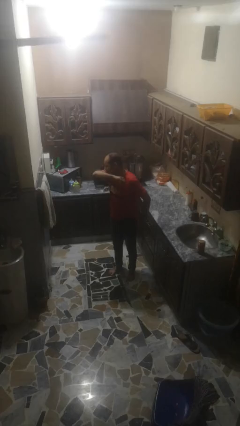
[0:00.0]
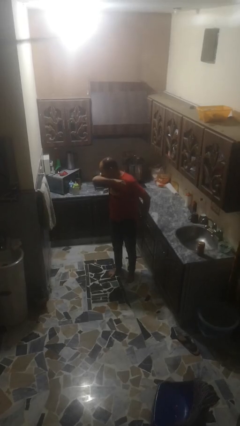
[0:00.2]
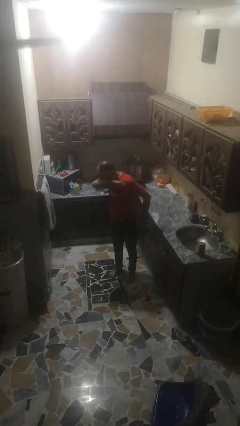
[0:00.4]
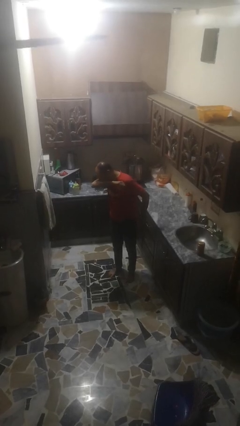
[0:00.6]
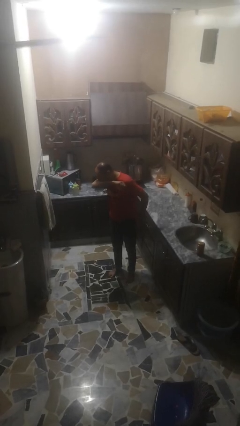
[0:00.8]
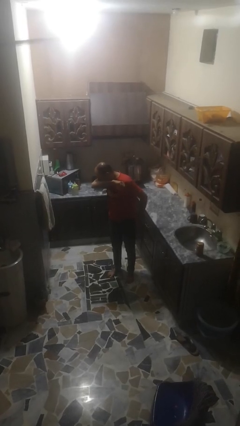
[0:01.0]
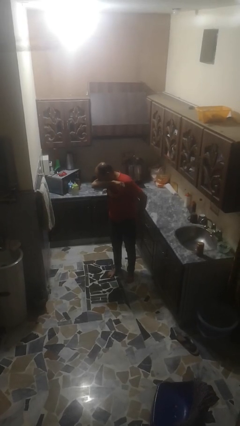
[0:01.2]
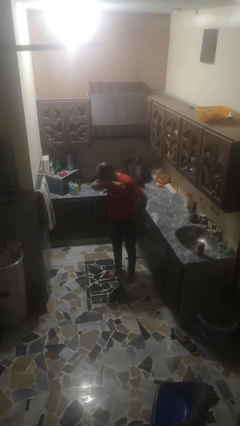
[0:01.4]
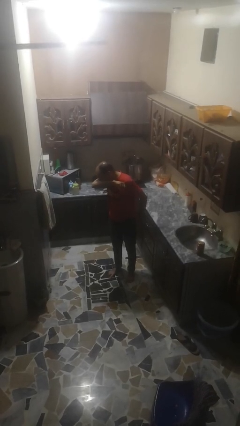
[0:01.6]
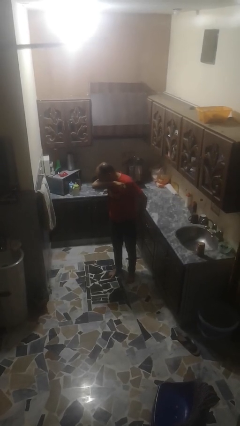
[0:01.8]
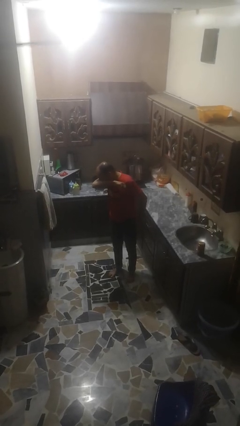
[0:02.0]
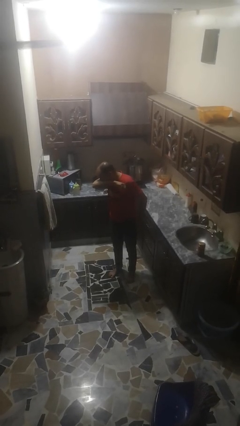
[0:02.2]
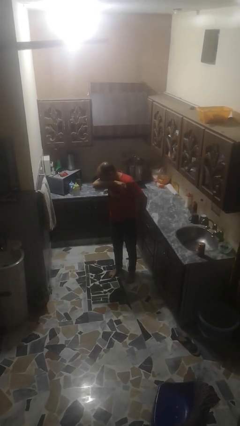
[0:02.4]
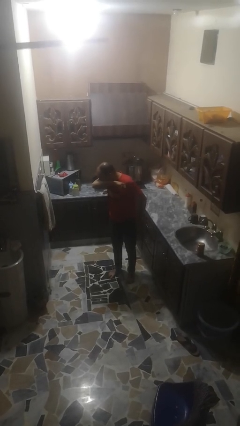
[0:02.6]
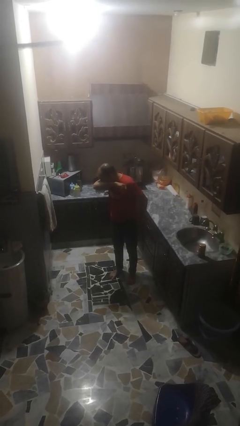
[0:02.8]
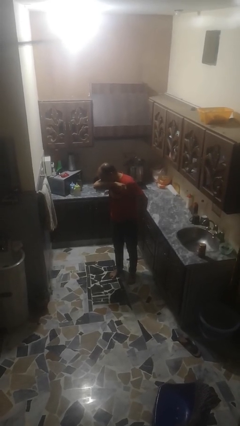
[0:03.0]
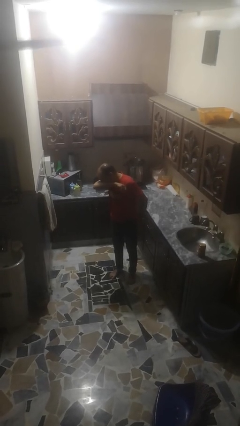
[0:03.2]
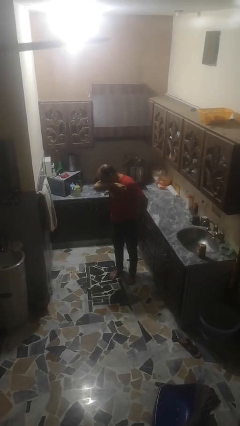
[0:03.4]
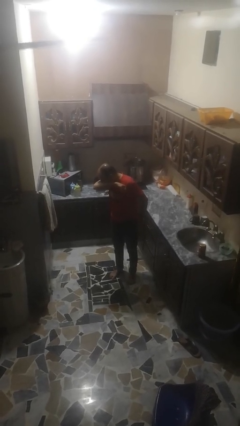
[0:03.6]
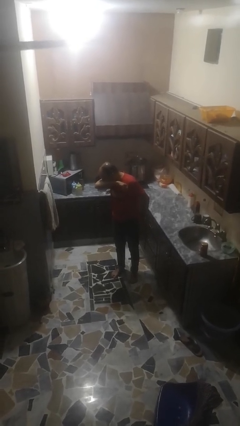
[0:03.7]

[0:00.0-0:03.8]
person sneezes into arm

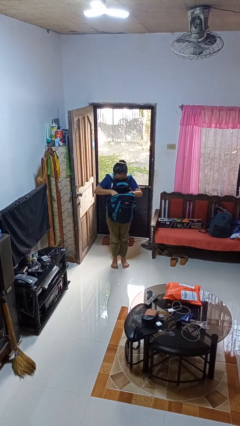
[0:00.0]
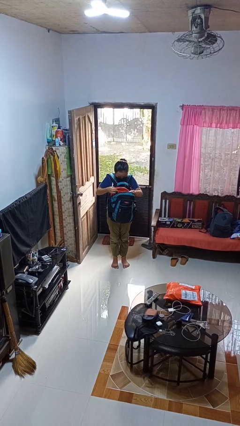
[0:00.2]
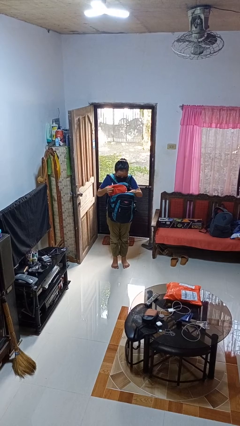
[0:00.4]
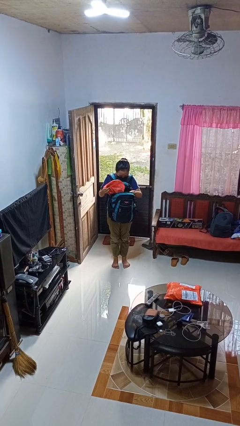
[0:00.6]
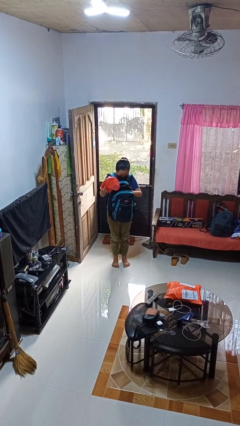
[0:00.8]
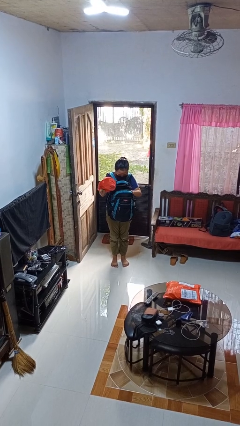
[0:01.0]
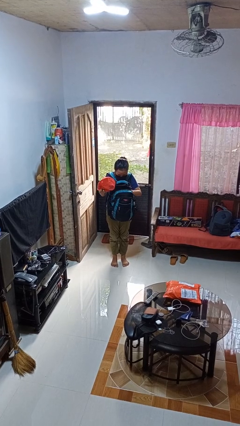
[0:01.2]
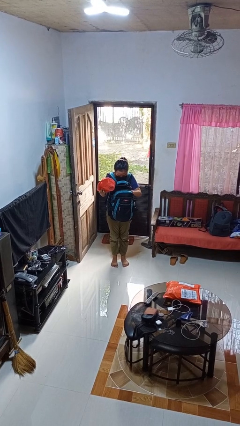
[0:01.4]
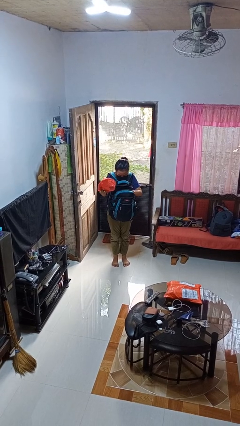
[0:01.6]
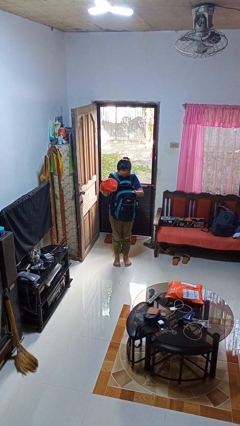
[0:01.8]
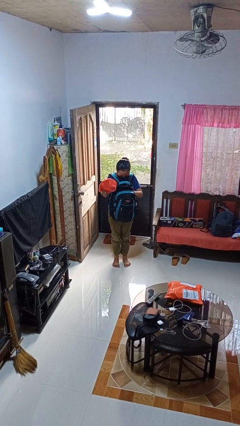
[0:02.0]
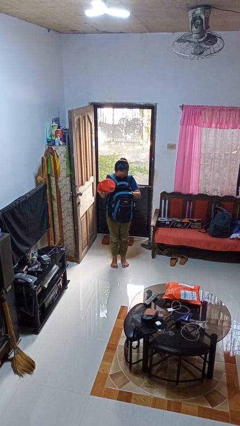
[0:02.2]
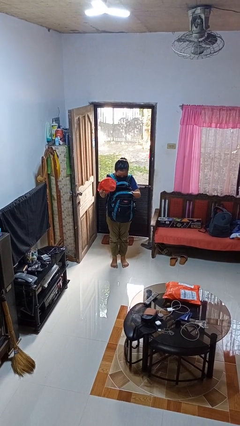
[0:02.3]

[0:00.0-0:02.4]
person takes object from backpack

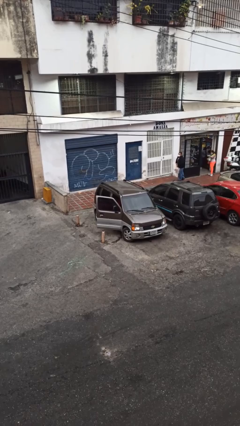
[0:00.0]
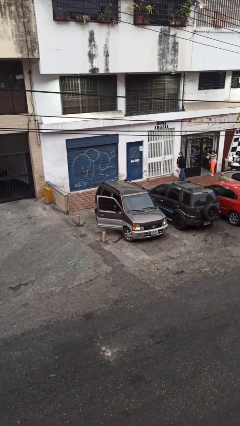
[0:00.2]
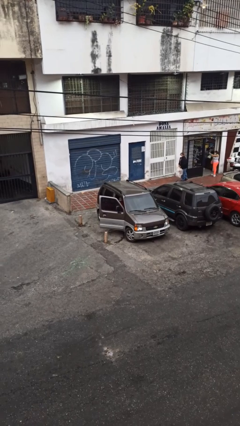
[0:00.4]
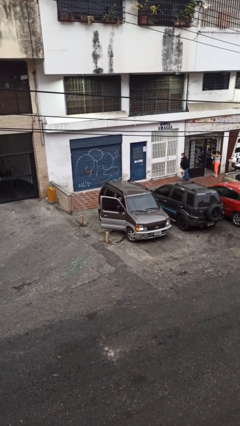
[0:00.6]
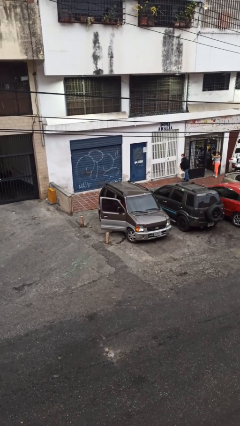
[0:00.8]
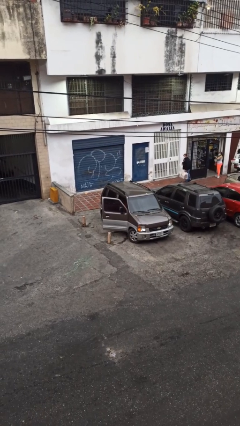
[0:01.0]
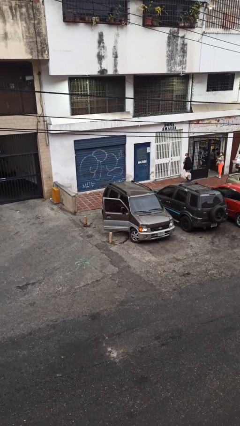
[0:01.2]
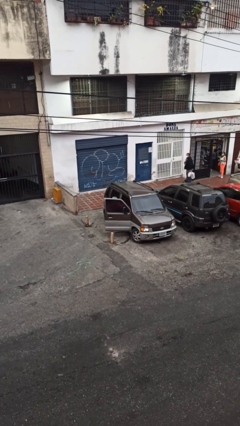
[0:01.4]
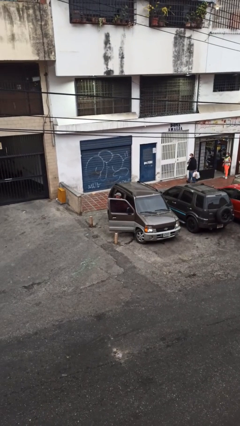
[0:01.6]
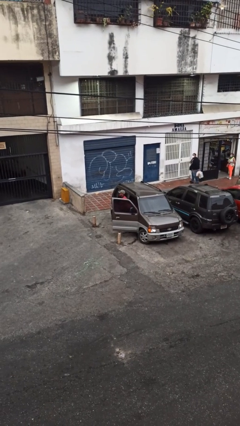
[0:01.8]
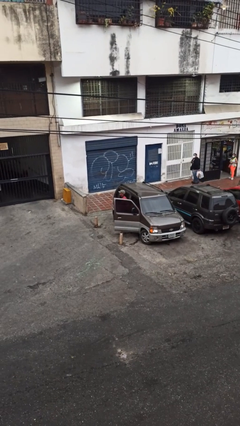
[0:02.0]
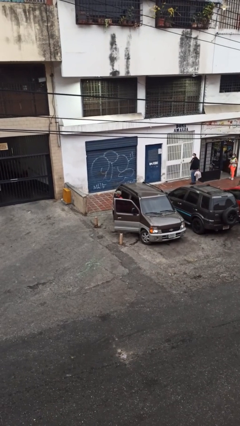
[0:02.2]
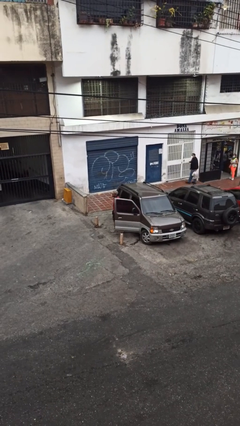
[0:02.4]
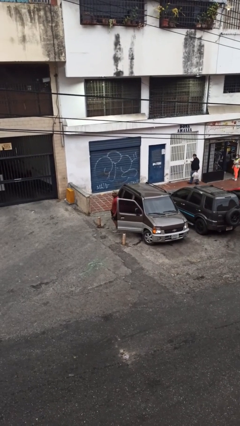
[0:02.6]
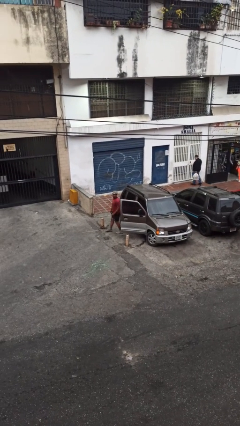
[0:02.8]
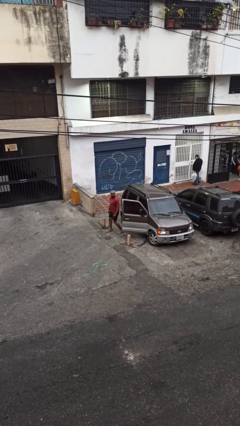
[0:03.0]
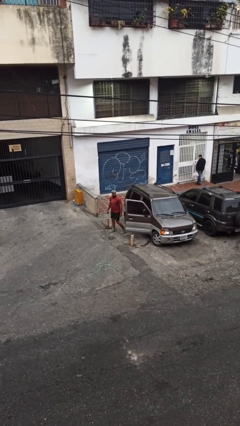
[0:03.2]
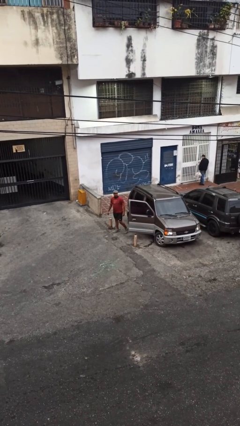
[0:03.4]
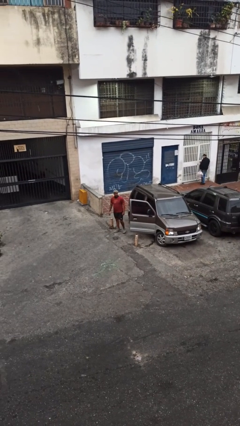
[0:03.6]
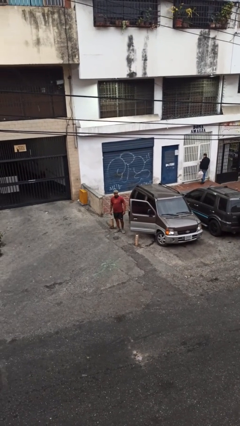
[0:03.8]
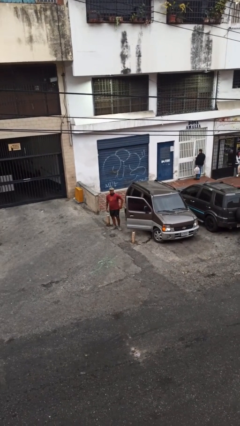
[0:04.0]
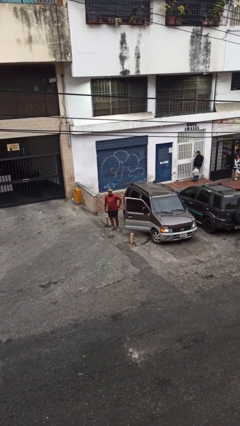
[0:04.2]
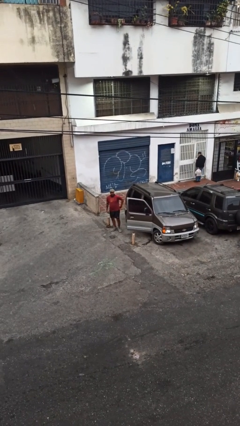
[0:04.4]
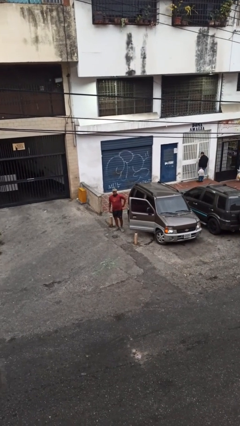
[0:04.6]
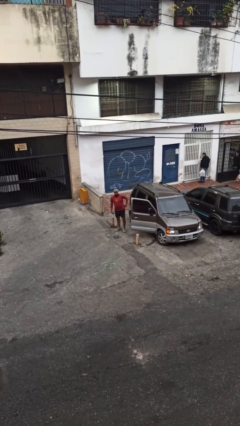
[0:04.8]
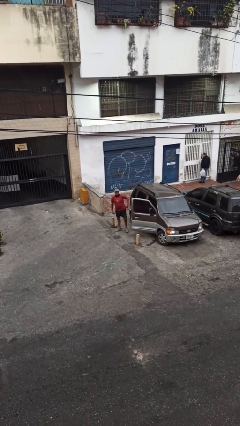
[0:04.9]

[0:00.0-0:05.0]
person exits car

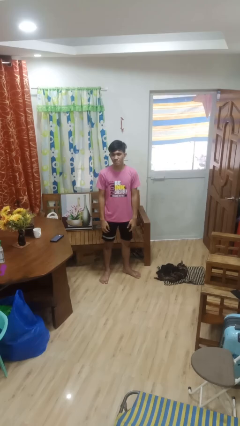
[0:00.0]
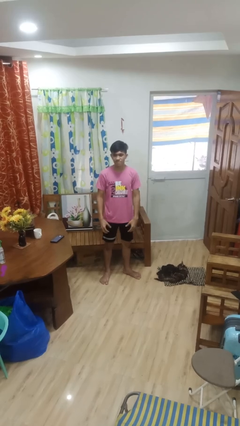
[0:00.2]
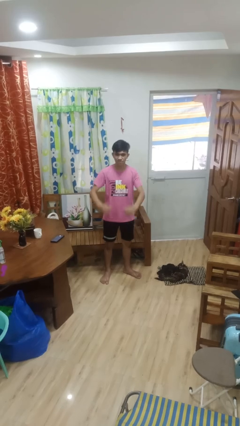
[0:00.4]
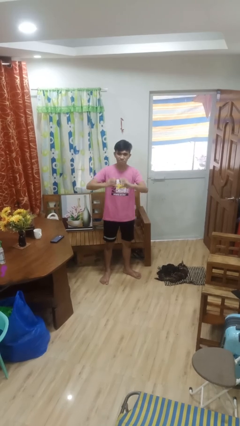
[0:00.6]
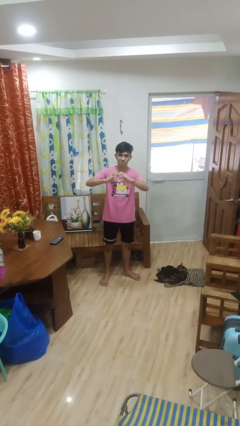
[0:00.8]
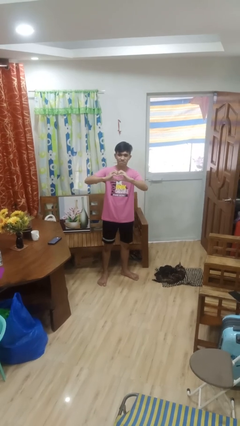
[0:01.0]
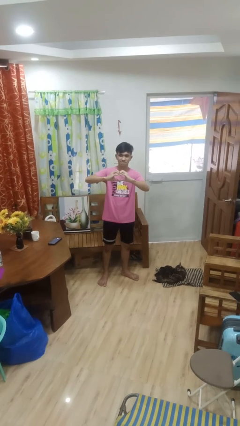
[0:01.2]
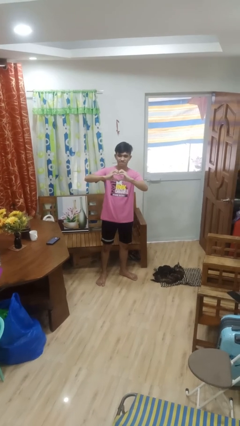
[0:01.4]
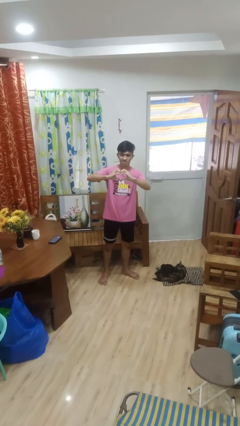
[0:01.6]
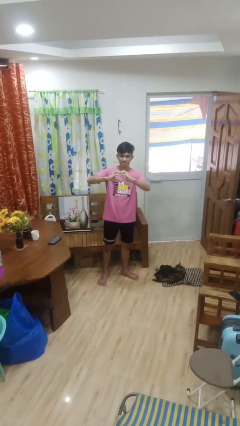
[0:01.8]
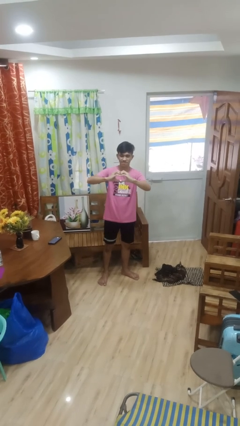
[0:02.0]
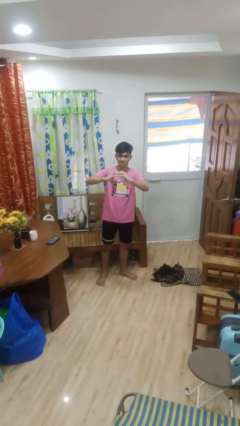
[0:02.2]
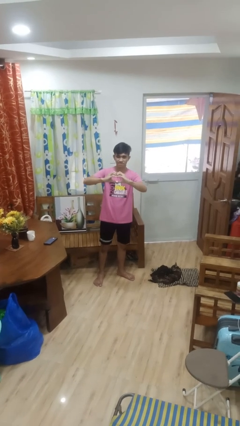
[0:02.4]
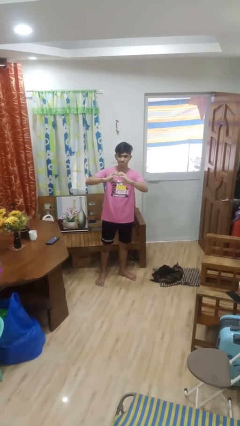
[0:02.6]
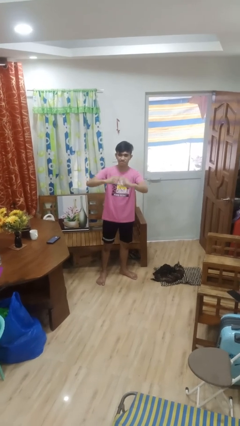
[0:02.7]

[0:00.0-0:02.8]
person gestures heart

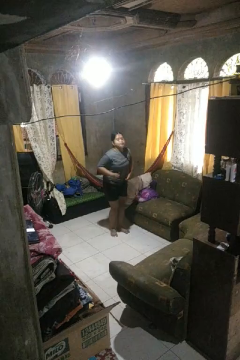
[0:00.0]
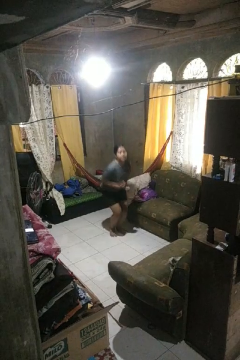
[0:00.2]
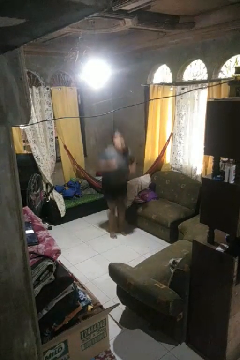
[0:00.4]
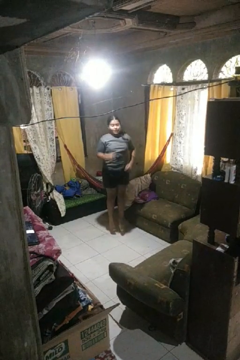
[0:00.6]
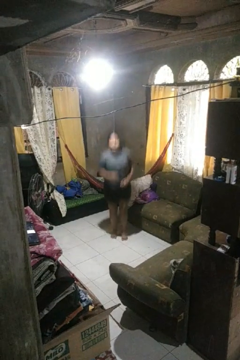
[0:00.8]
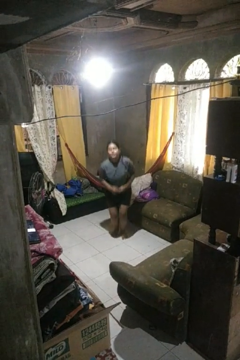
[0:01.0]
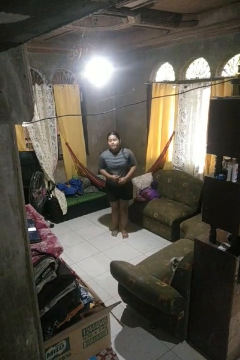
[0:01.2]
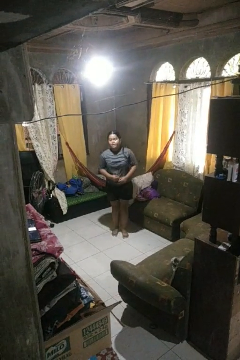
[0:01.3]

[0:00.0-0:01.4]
person jumps

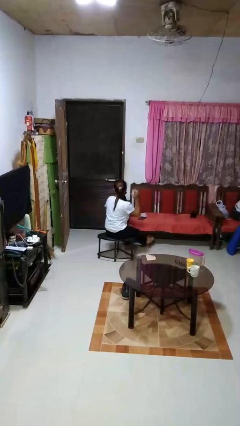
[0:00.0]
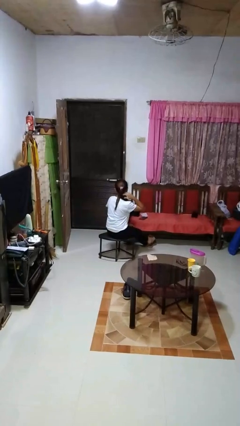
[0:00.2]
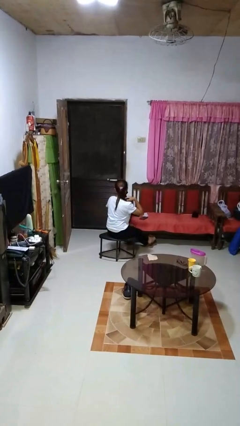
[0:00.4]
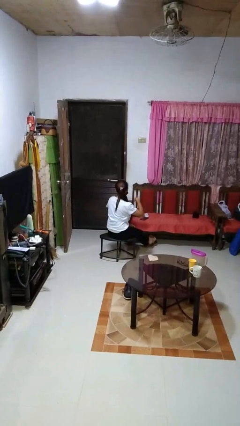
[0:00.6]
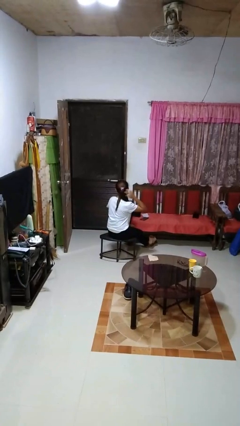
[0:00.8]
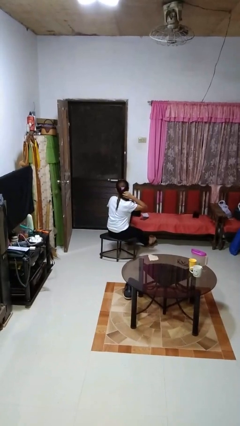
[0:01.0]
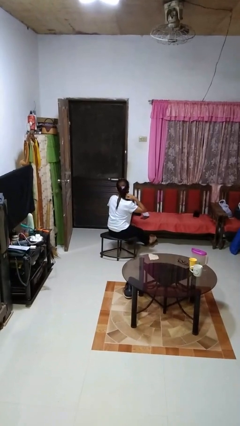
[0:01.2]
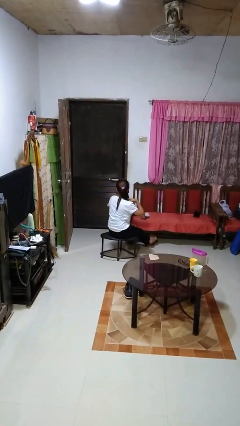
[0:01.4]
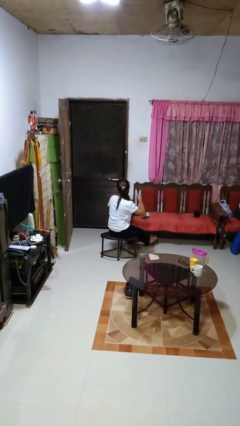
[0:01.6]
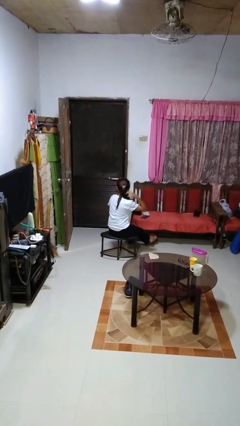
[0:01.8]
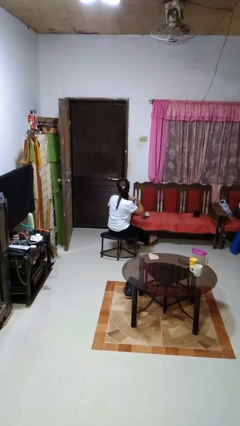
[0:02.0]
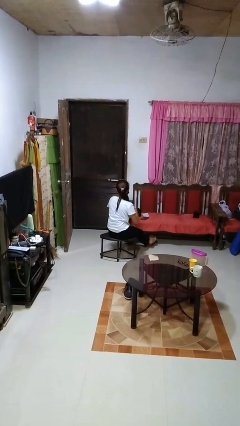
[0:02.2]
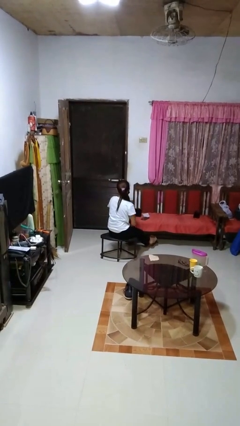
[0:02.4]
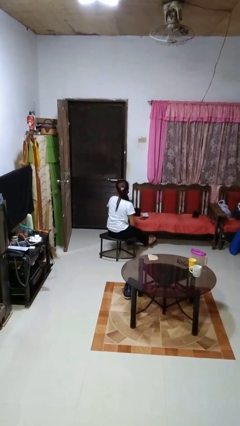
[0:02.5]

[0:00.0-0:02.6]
person strokes hair
